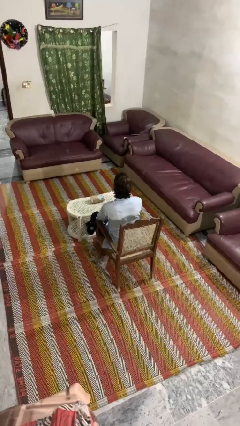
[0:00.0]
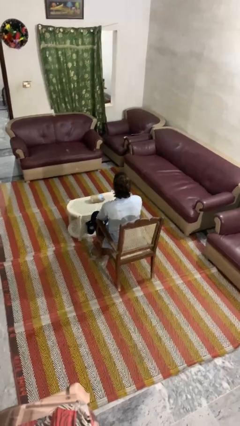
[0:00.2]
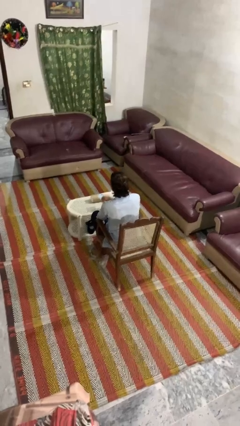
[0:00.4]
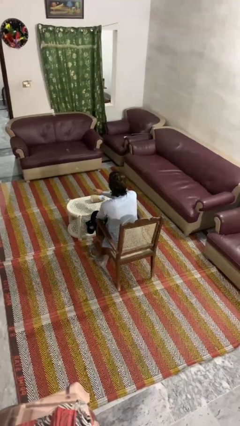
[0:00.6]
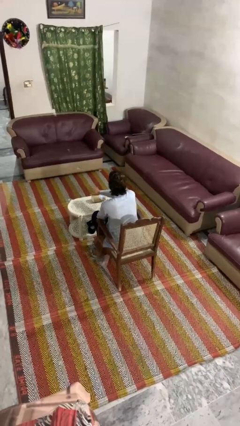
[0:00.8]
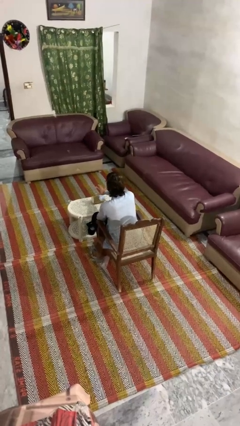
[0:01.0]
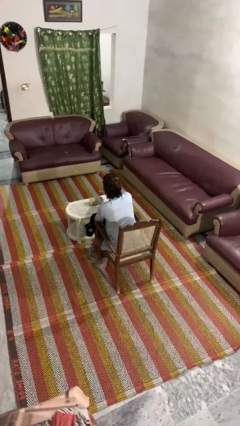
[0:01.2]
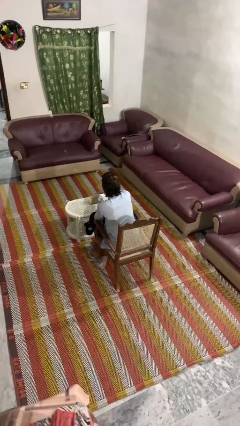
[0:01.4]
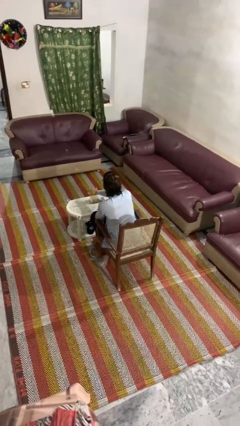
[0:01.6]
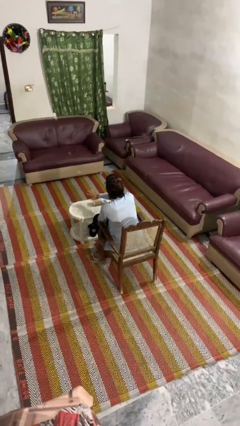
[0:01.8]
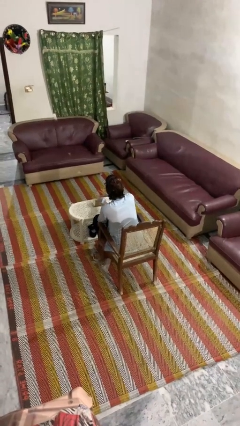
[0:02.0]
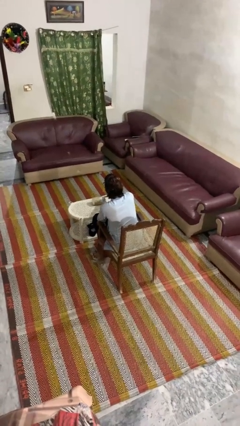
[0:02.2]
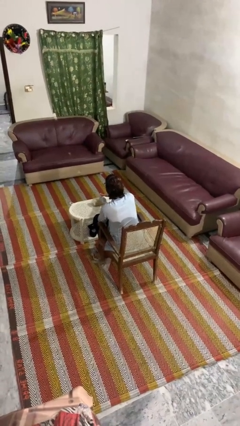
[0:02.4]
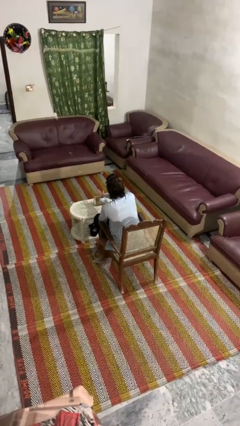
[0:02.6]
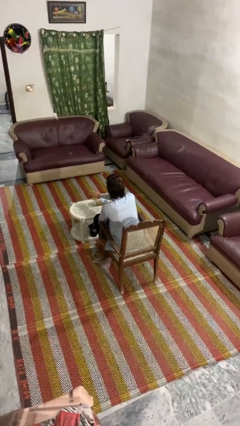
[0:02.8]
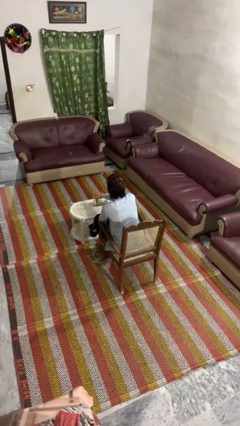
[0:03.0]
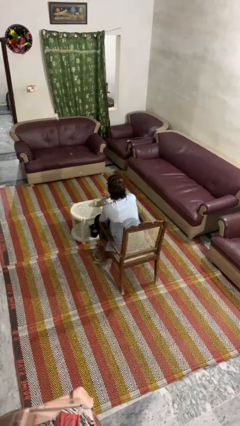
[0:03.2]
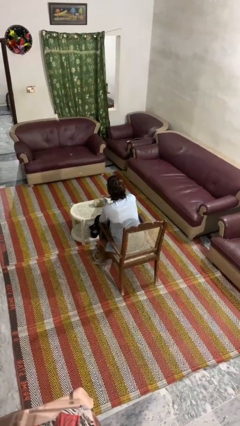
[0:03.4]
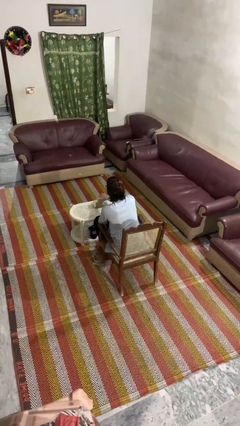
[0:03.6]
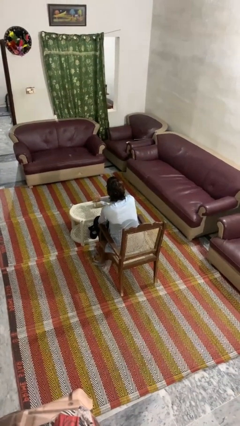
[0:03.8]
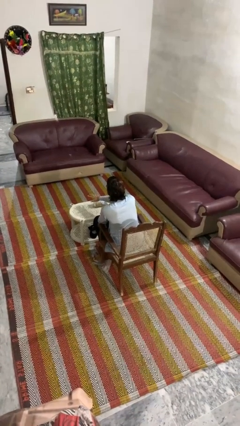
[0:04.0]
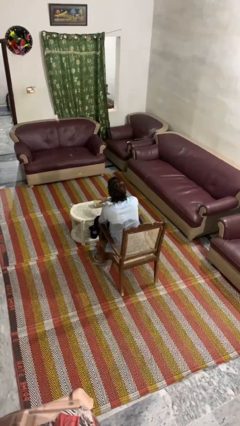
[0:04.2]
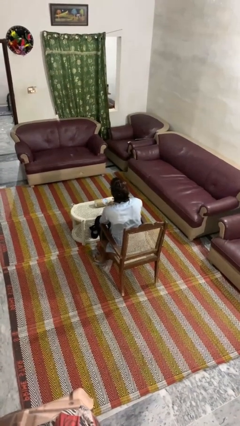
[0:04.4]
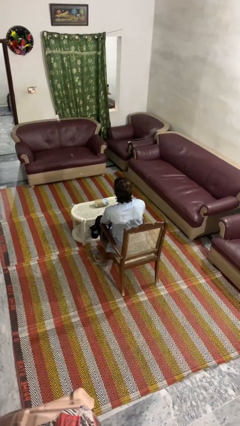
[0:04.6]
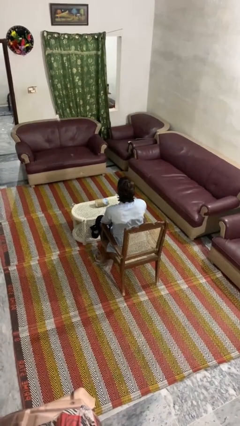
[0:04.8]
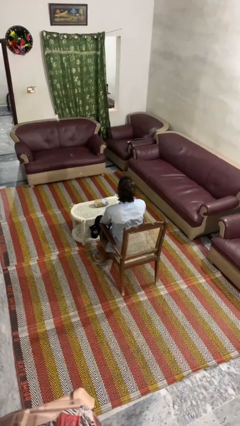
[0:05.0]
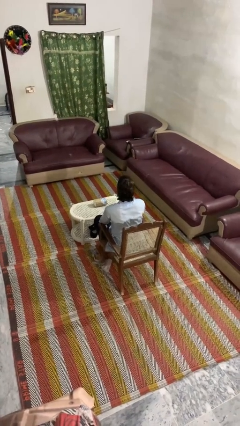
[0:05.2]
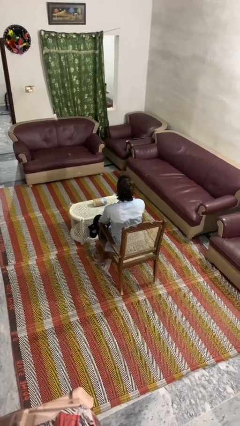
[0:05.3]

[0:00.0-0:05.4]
person waves hand over object

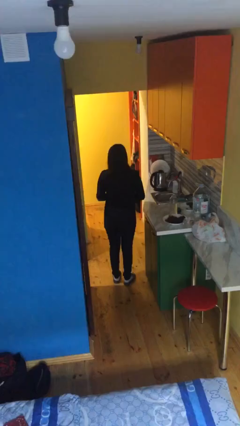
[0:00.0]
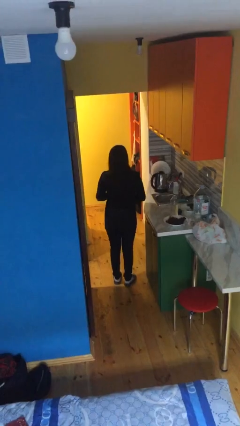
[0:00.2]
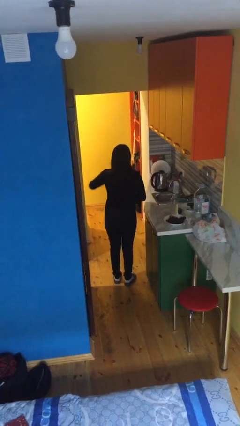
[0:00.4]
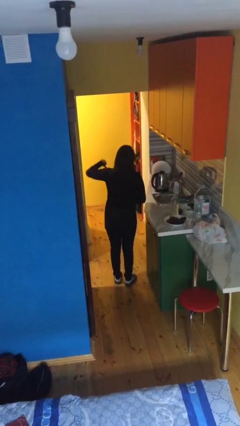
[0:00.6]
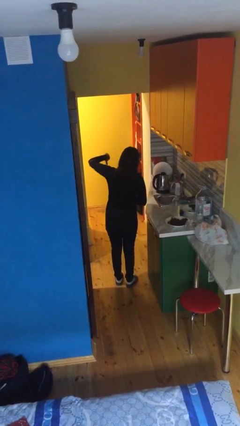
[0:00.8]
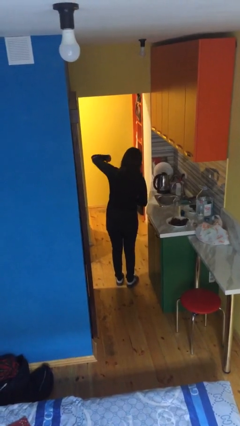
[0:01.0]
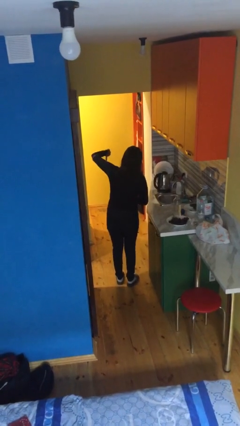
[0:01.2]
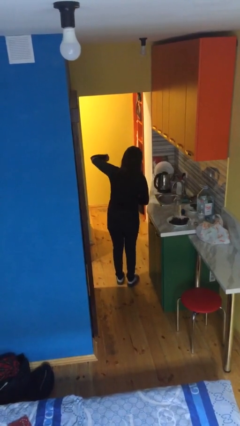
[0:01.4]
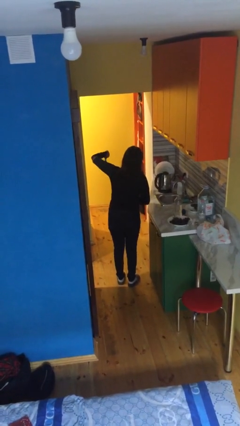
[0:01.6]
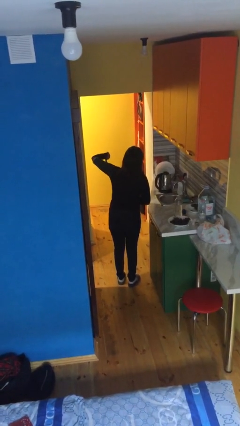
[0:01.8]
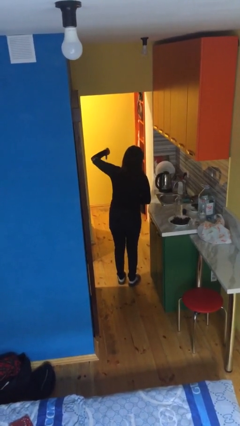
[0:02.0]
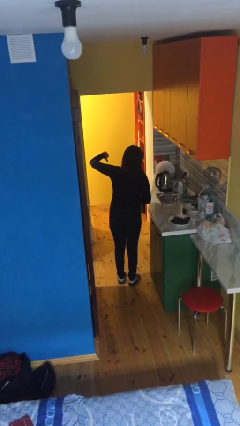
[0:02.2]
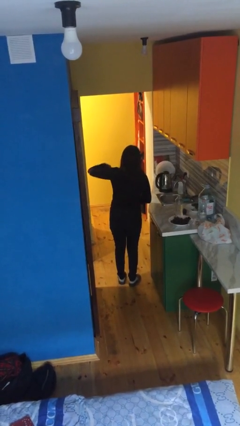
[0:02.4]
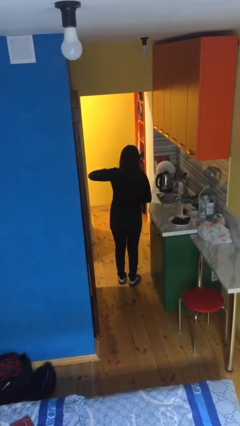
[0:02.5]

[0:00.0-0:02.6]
person gestures thumbs down

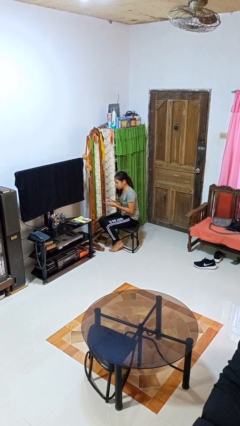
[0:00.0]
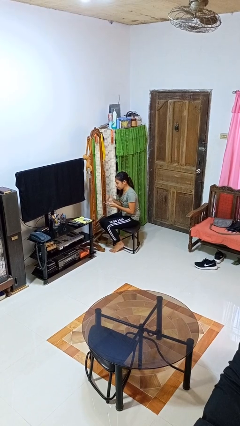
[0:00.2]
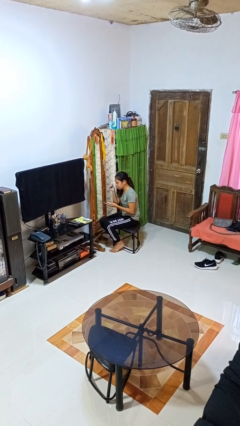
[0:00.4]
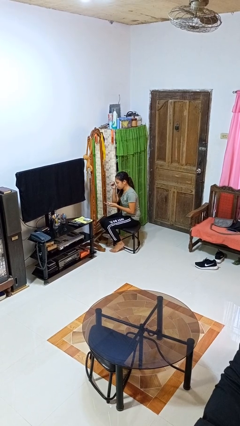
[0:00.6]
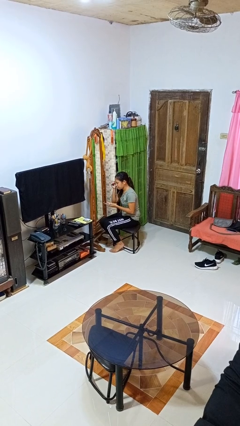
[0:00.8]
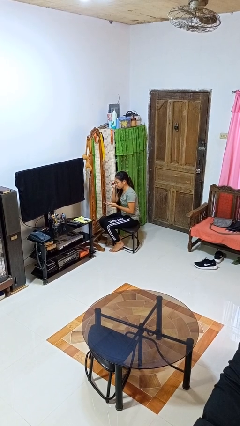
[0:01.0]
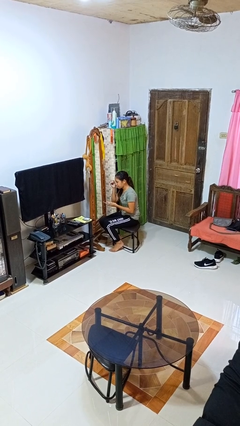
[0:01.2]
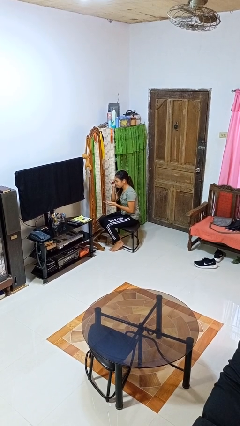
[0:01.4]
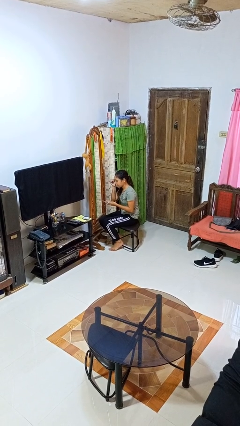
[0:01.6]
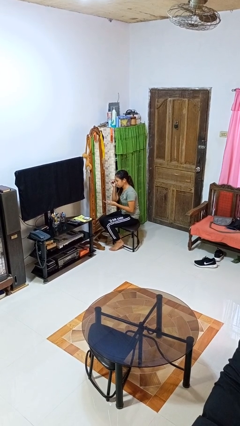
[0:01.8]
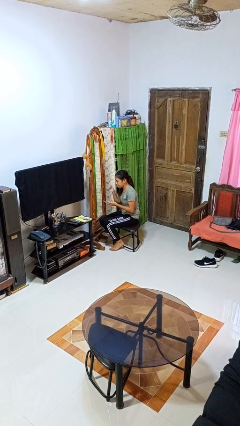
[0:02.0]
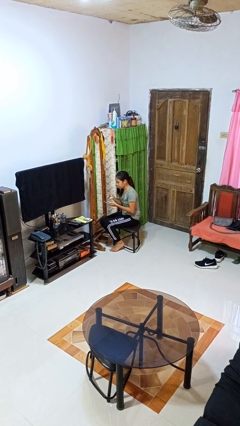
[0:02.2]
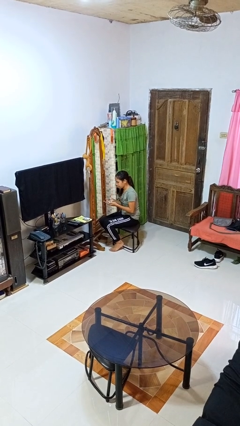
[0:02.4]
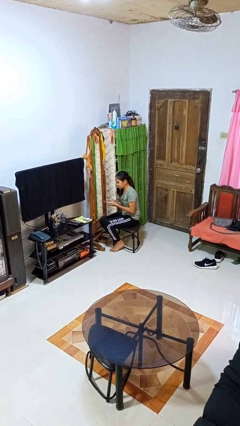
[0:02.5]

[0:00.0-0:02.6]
person applies eye makeup

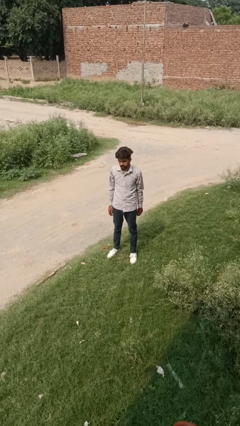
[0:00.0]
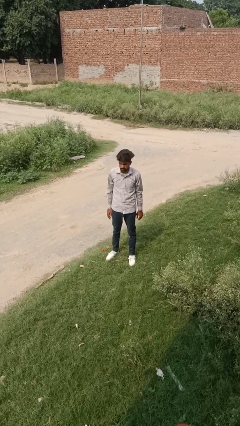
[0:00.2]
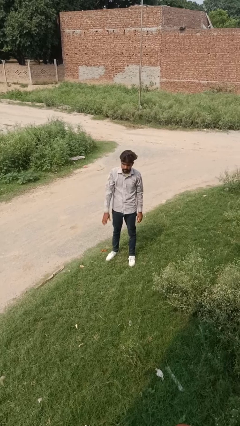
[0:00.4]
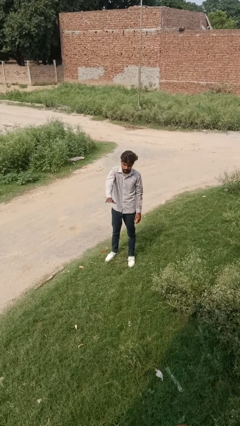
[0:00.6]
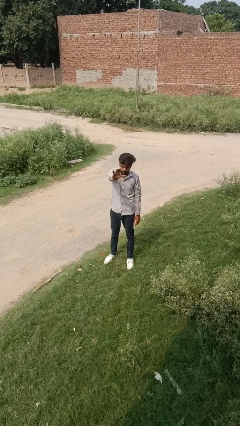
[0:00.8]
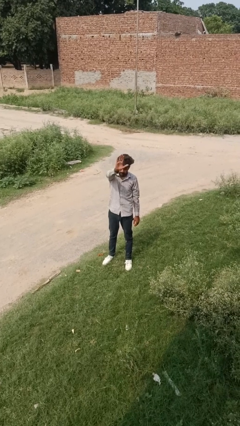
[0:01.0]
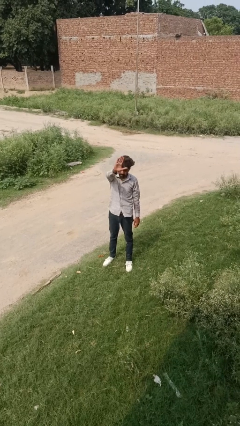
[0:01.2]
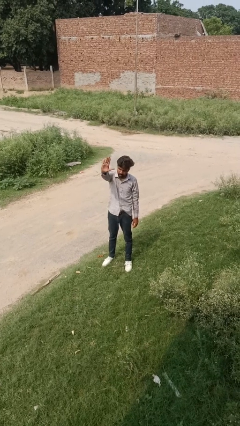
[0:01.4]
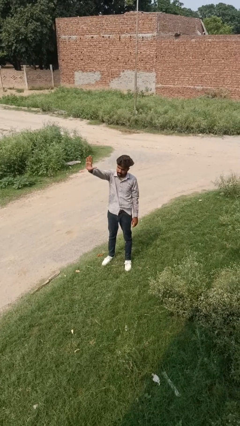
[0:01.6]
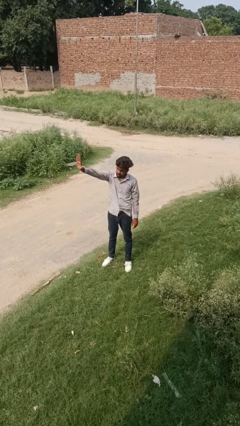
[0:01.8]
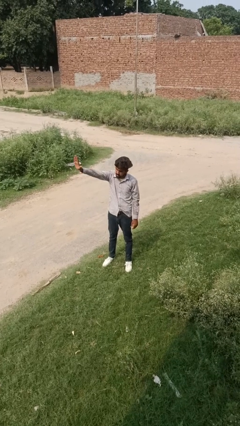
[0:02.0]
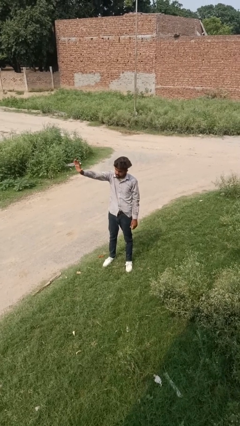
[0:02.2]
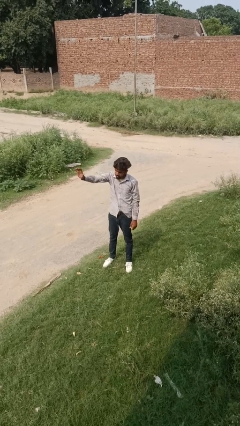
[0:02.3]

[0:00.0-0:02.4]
person gestures swipe right

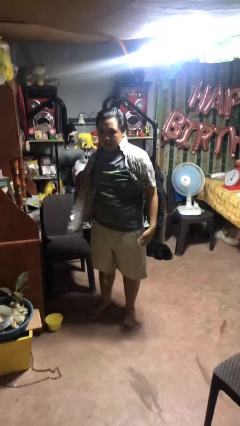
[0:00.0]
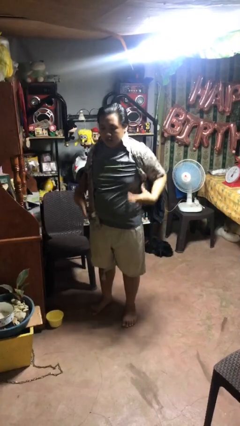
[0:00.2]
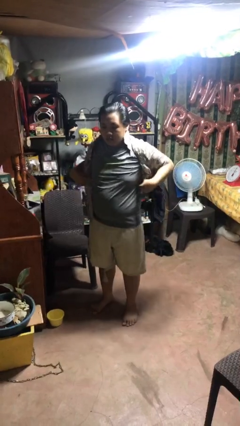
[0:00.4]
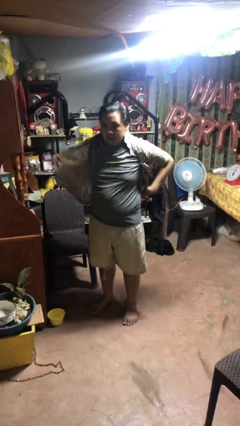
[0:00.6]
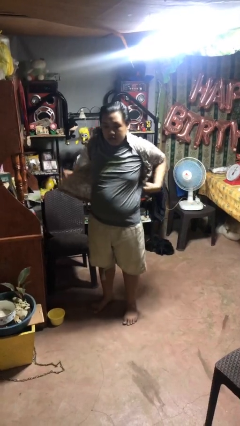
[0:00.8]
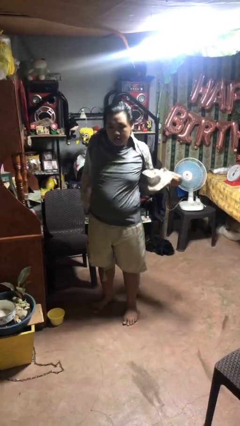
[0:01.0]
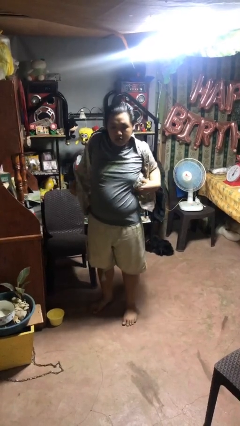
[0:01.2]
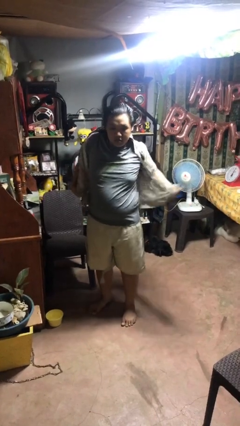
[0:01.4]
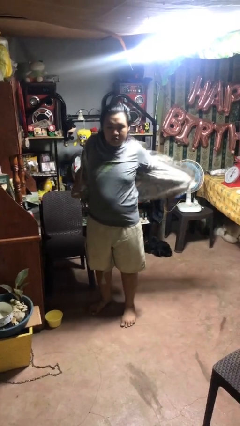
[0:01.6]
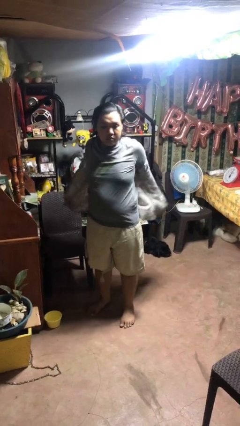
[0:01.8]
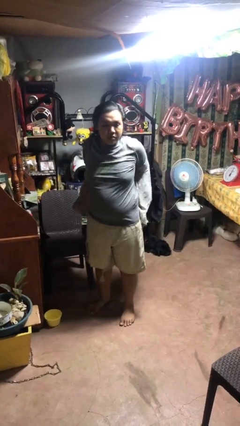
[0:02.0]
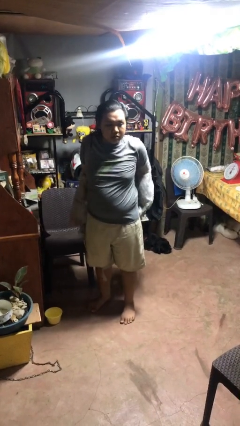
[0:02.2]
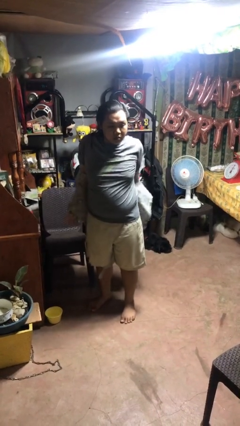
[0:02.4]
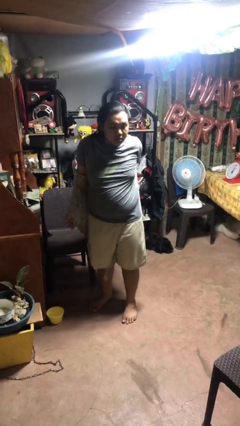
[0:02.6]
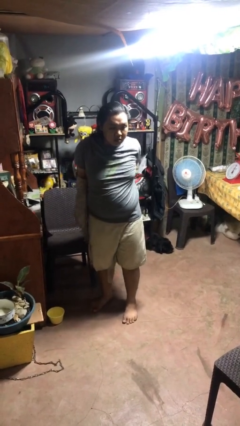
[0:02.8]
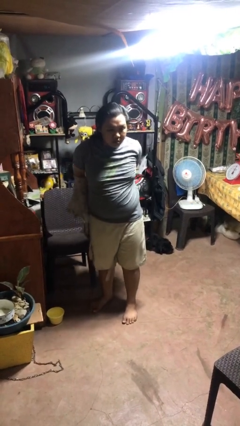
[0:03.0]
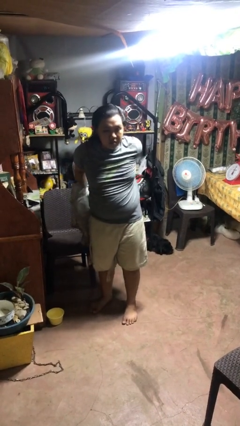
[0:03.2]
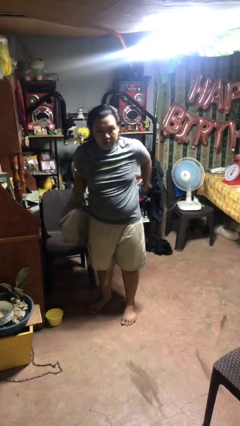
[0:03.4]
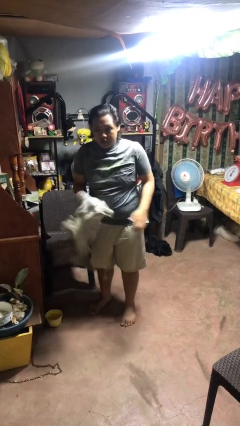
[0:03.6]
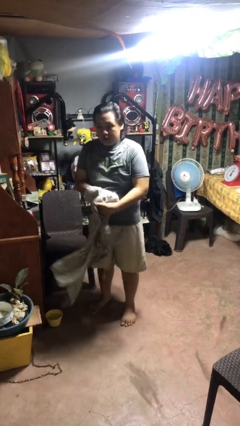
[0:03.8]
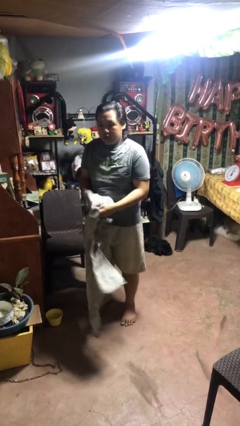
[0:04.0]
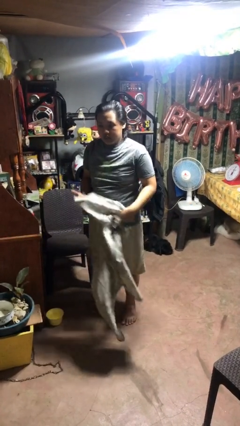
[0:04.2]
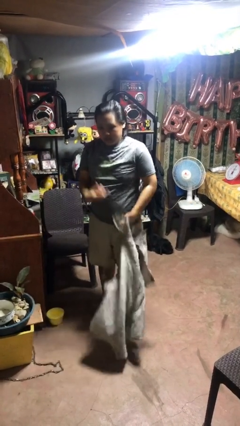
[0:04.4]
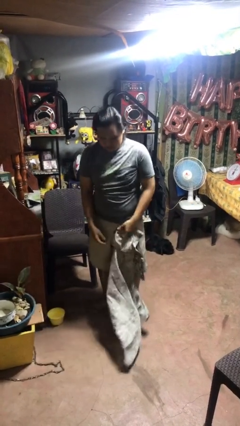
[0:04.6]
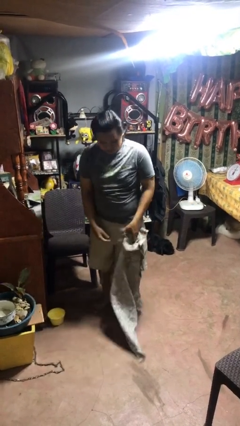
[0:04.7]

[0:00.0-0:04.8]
person takes off shirt

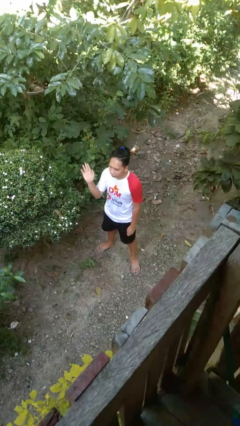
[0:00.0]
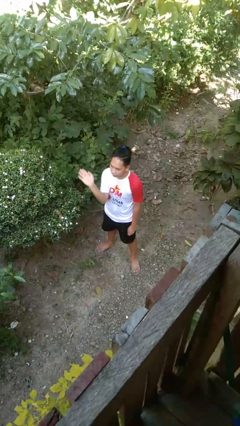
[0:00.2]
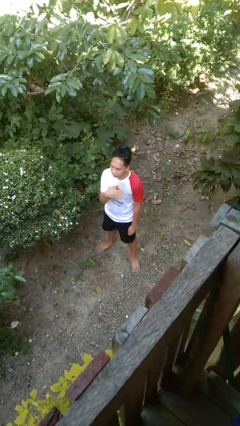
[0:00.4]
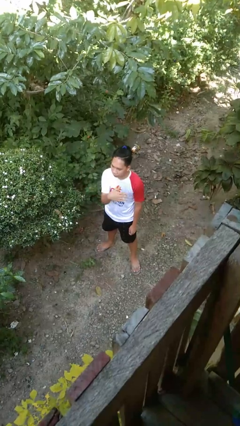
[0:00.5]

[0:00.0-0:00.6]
person gestures swipe left
